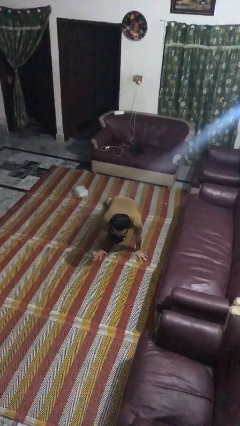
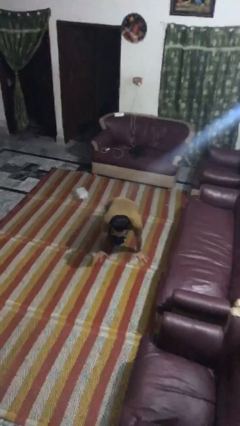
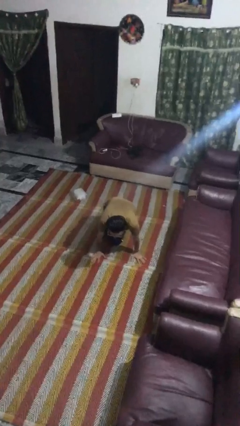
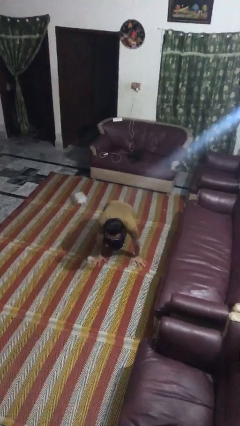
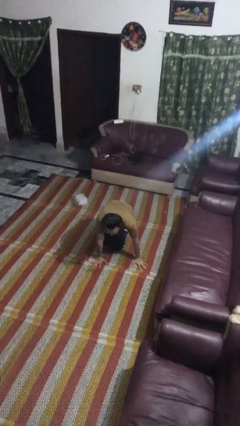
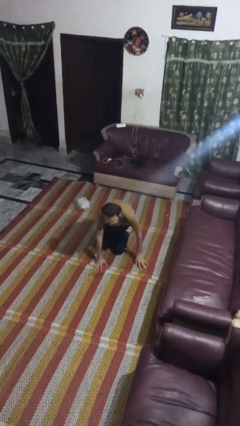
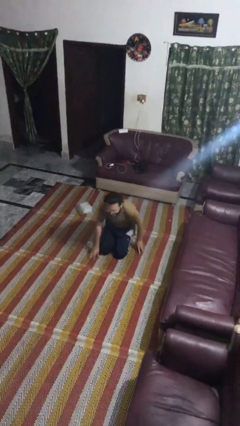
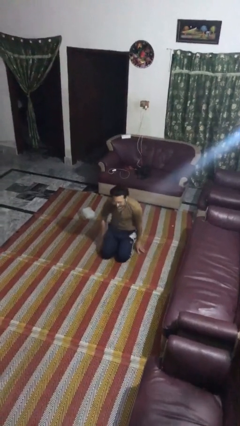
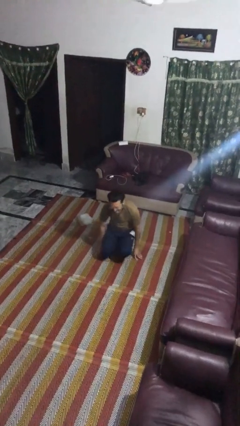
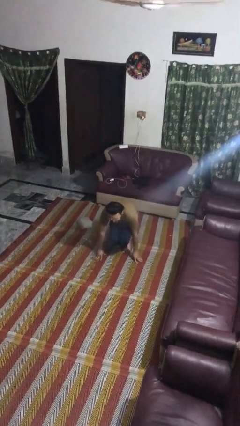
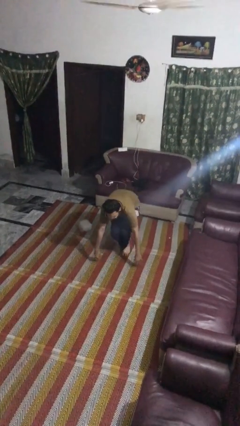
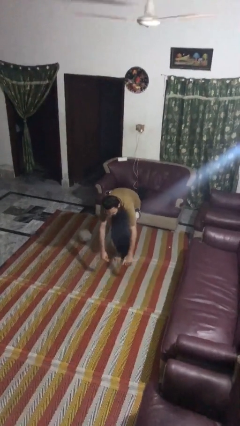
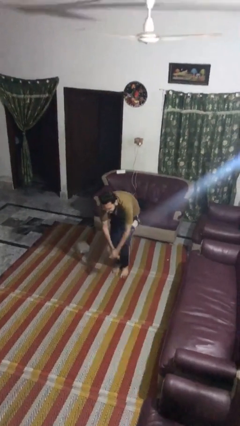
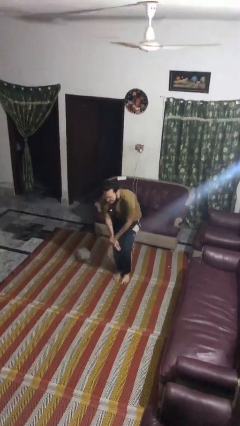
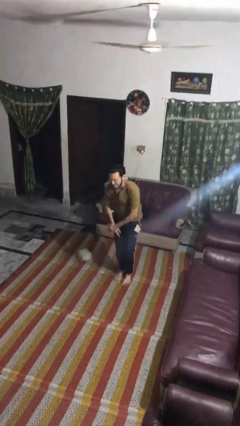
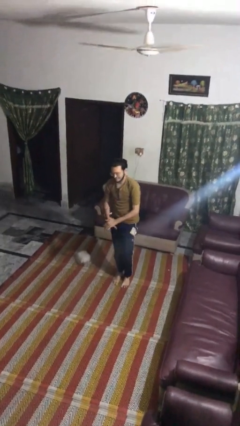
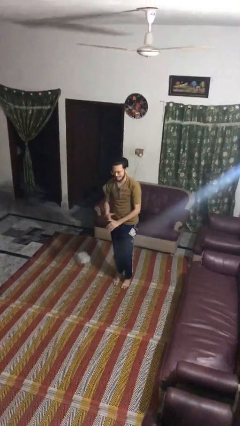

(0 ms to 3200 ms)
person stands up from floor

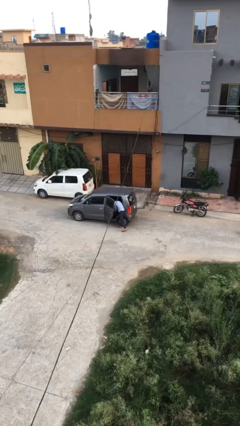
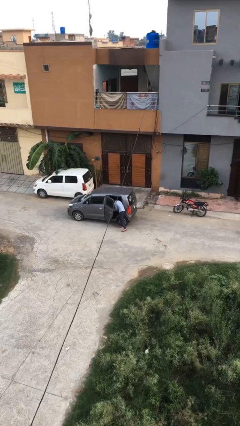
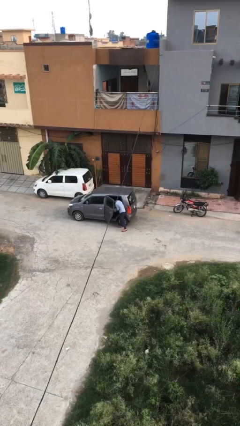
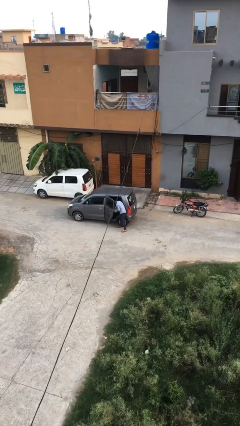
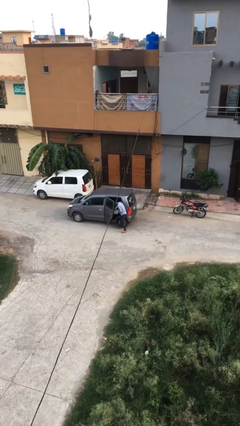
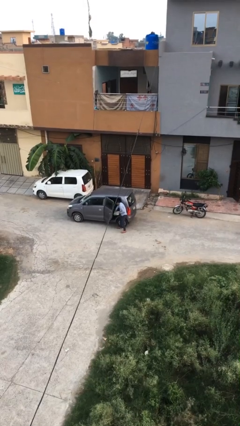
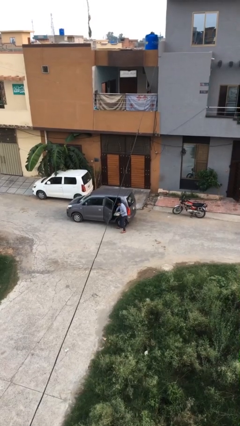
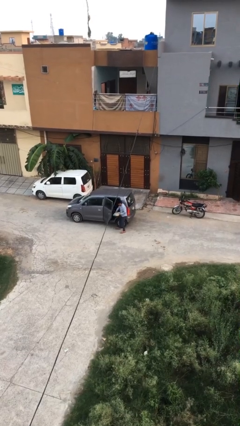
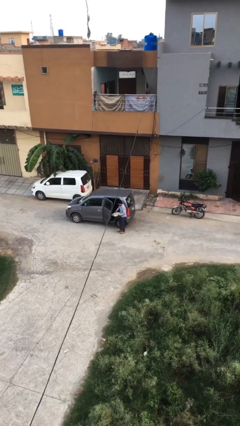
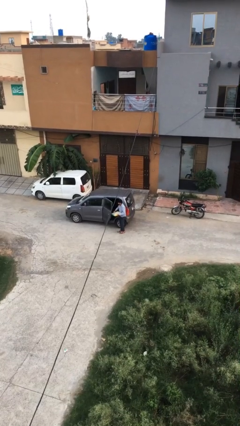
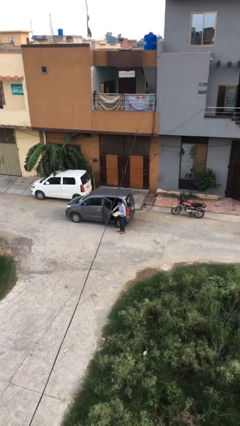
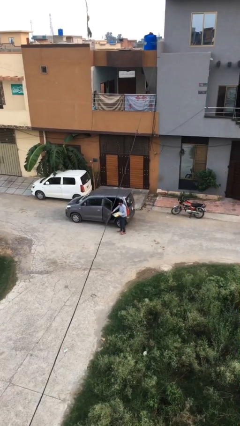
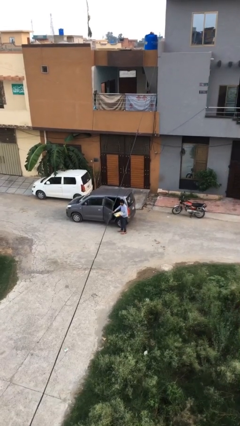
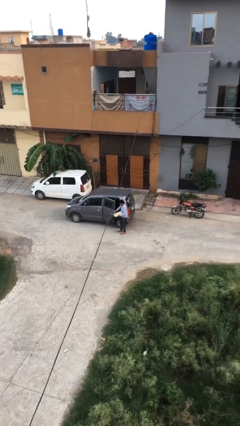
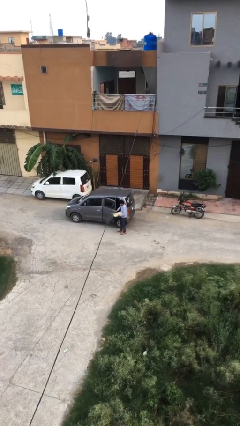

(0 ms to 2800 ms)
person unloads car

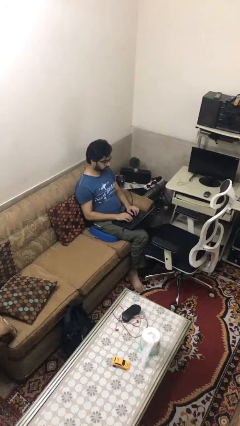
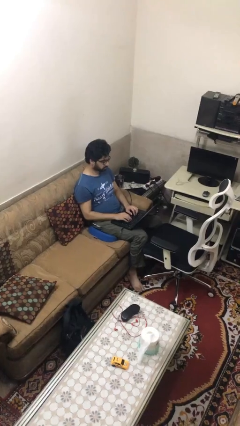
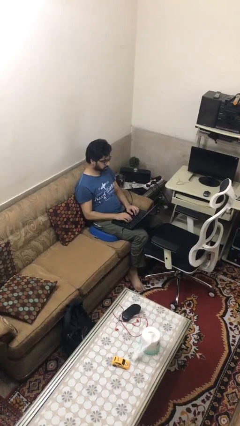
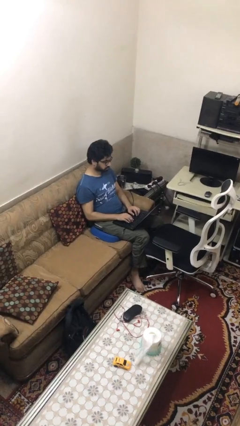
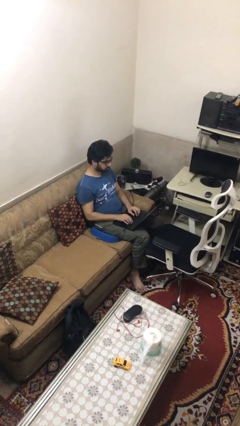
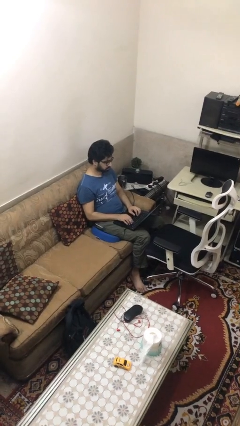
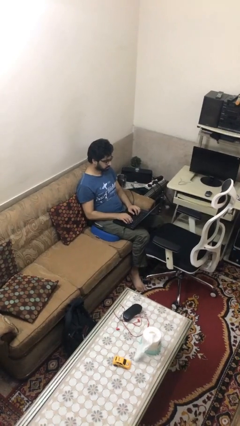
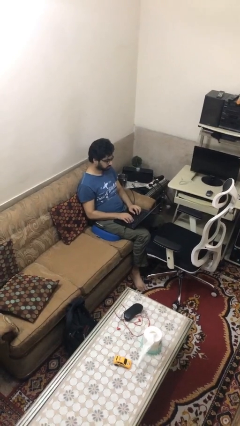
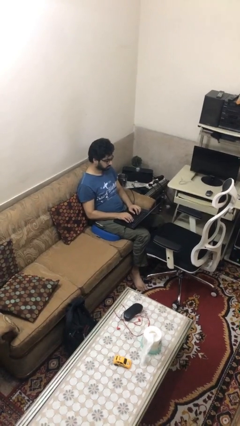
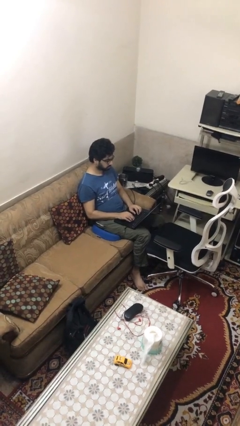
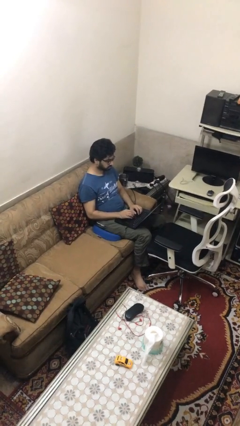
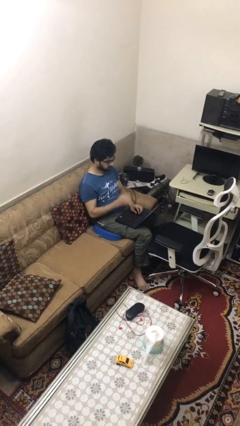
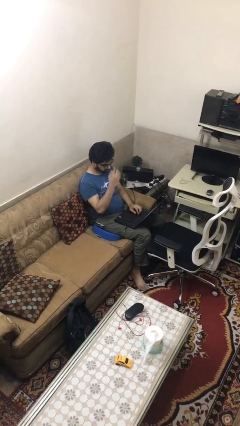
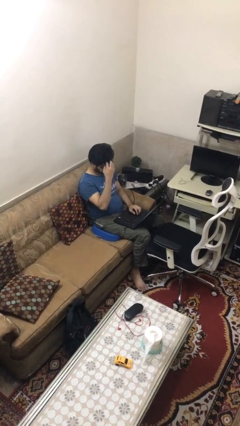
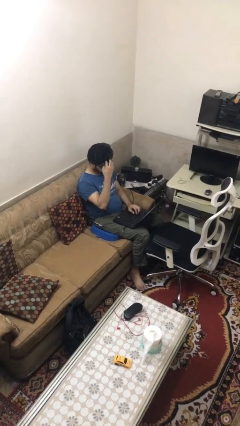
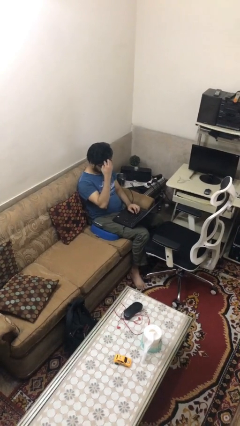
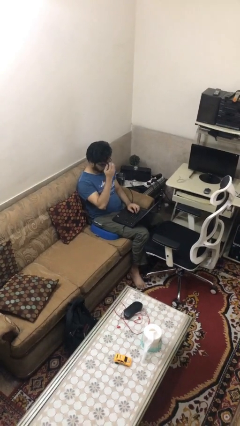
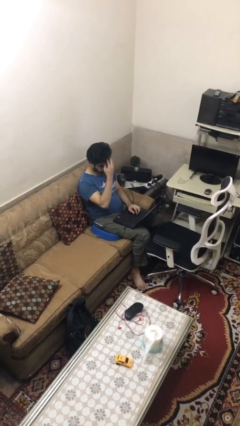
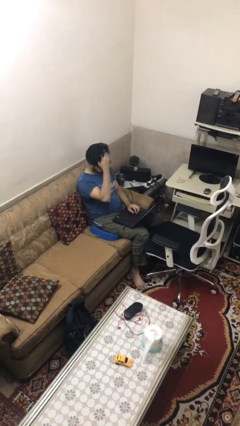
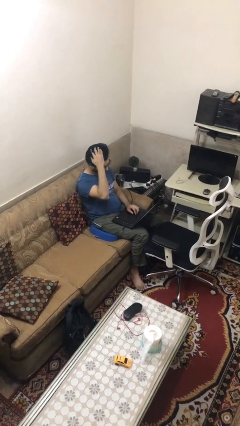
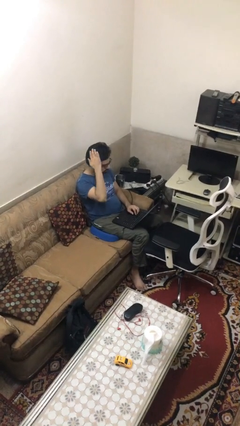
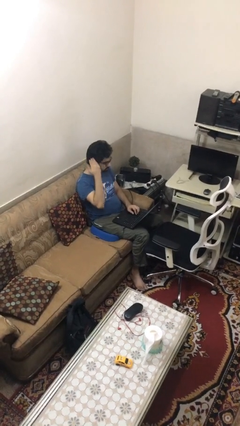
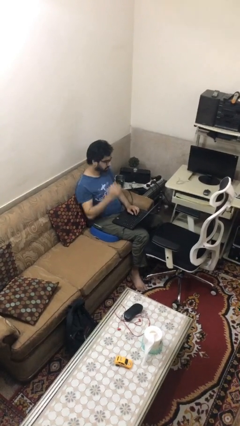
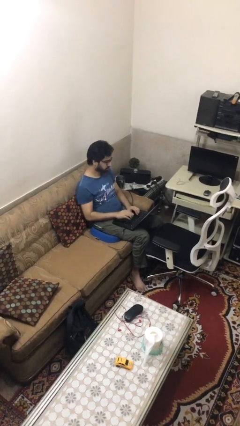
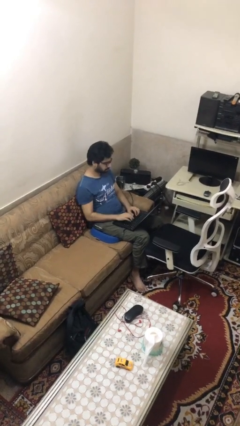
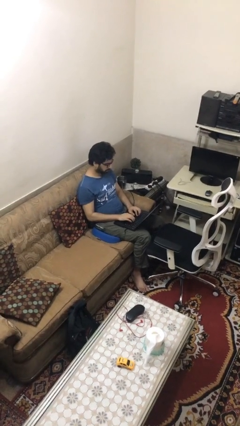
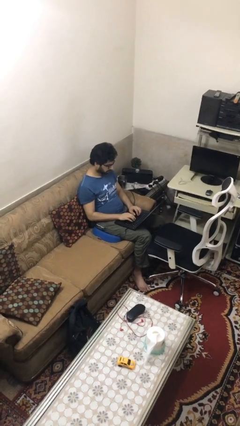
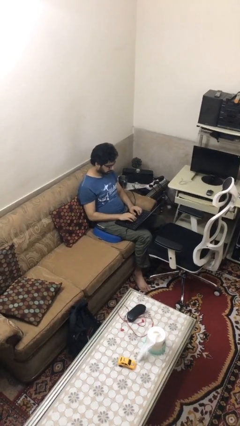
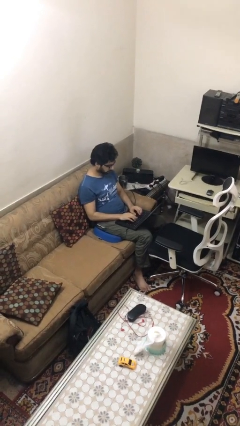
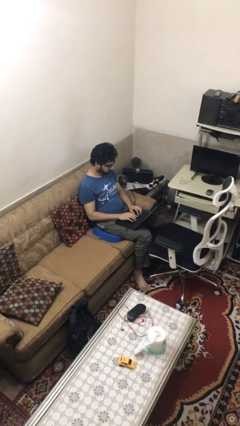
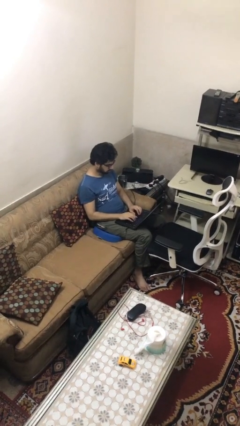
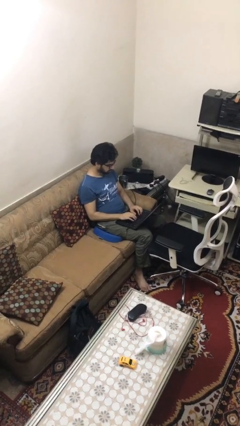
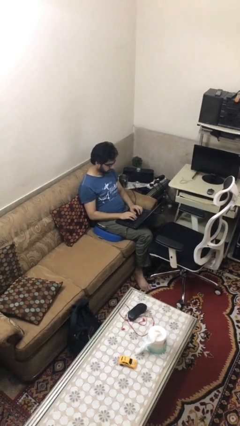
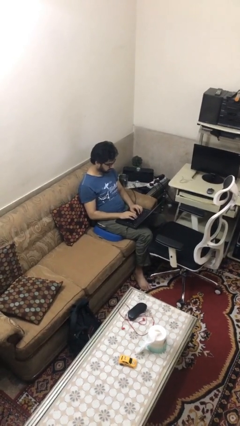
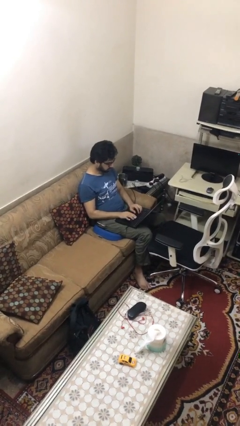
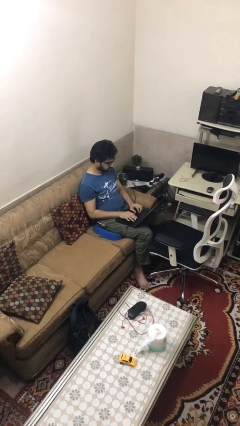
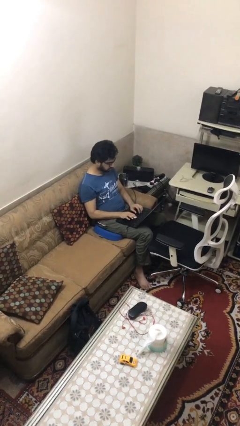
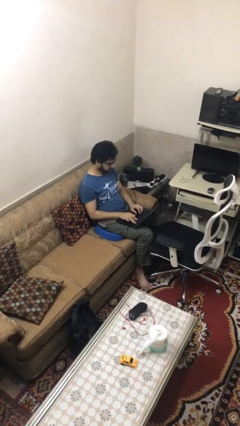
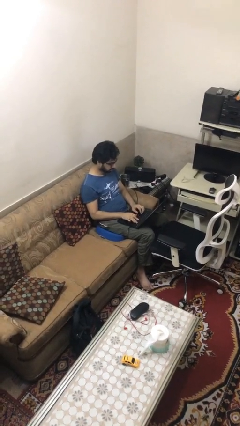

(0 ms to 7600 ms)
person interacts with laptop

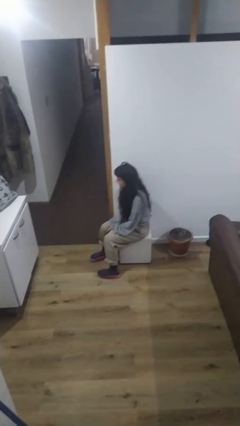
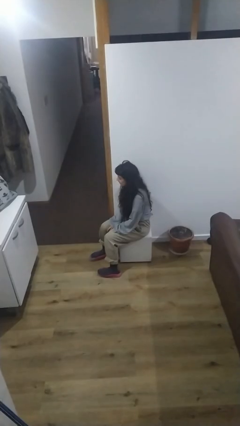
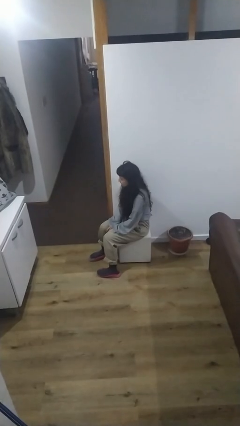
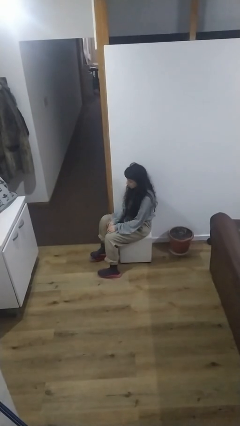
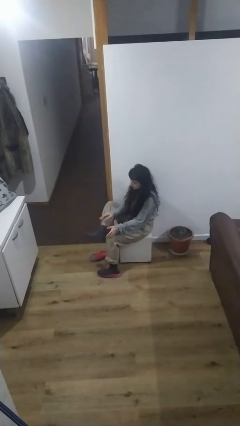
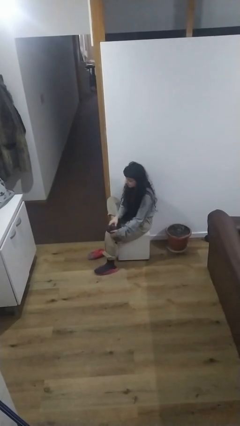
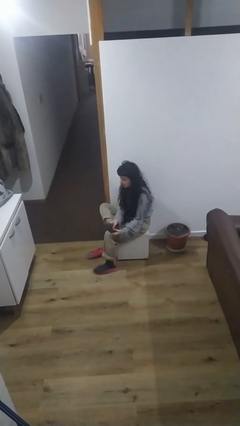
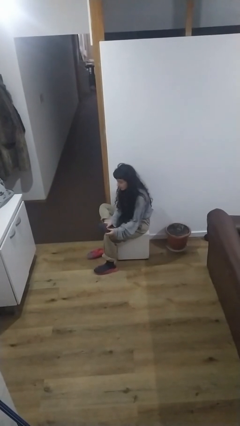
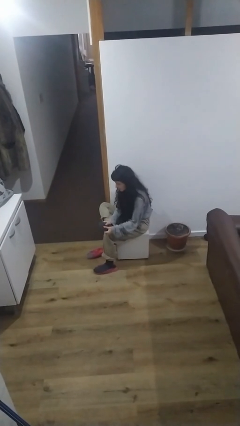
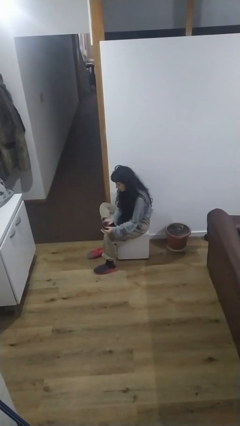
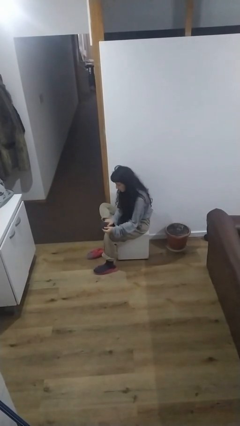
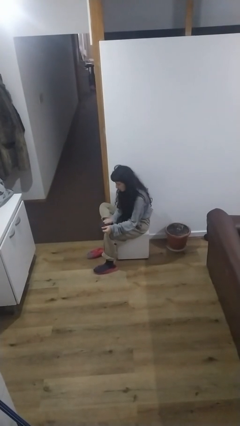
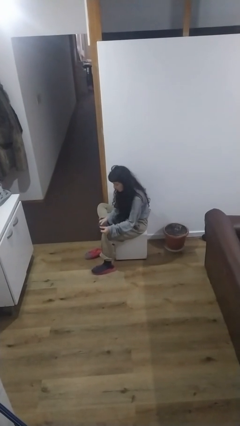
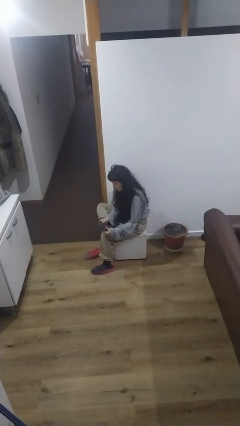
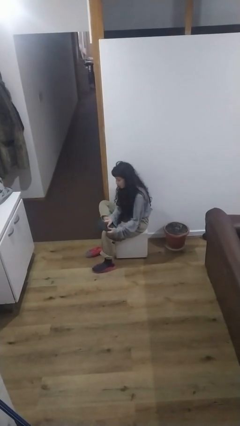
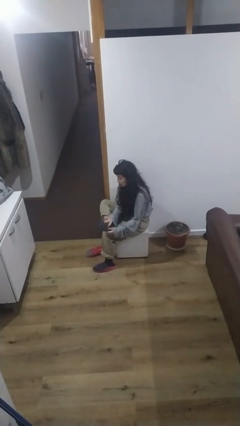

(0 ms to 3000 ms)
person rubs foot

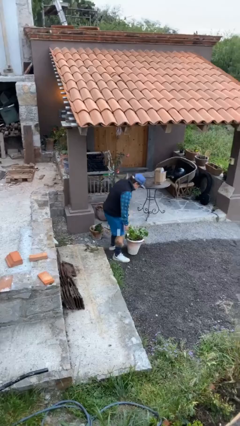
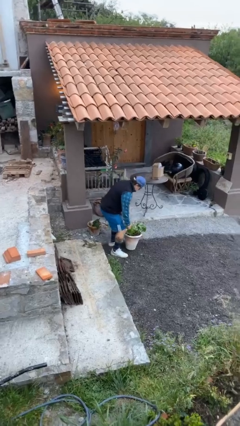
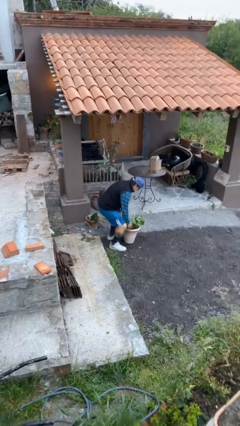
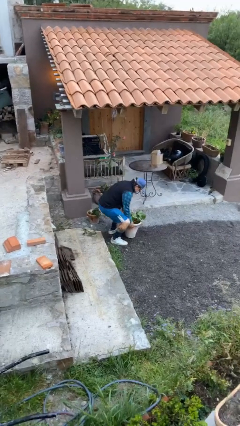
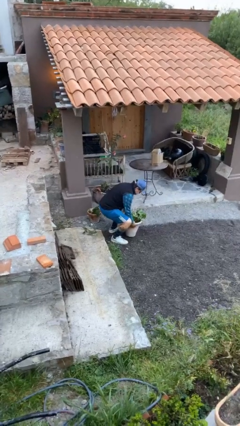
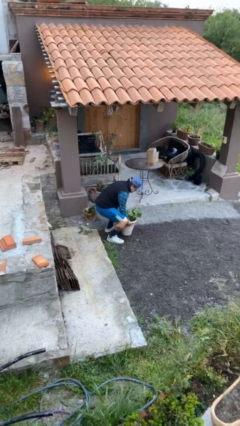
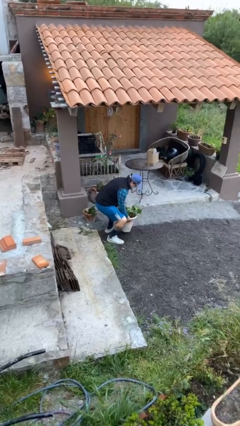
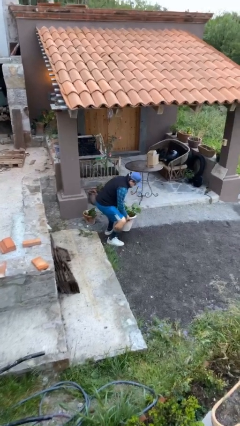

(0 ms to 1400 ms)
person picks up object from floor
